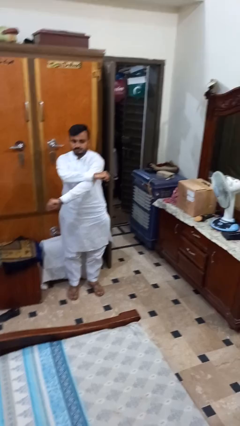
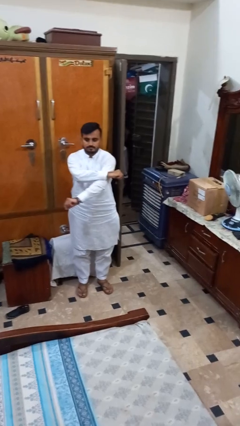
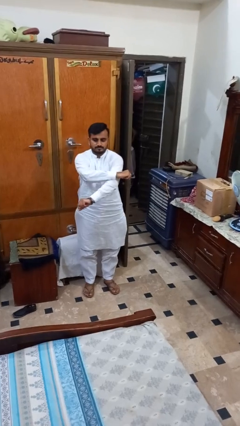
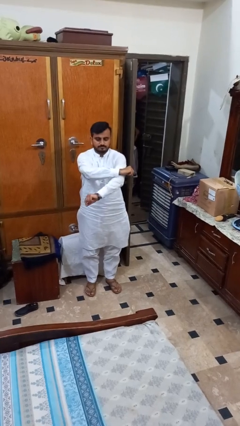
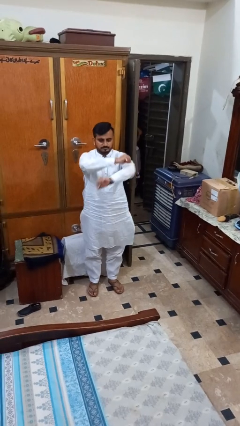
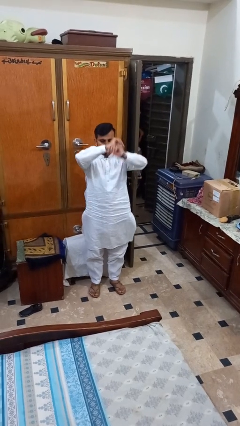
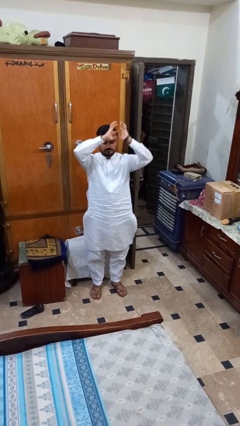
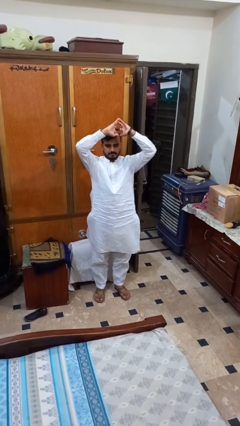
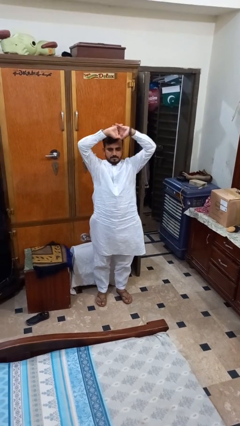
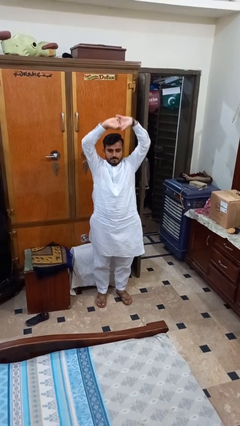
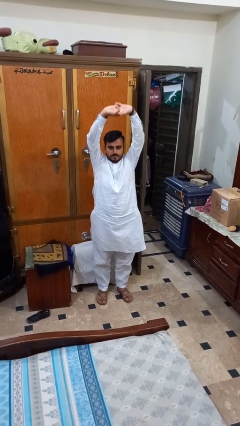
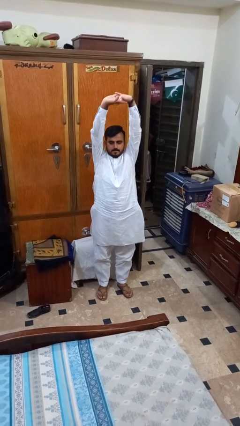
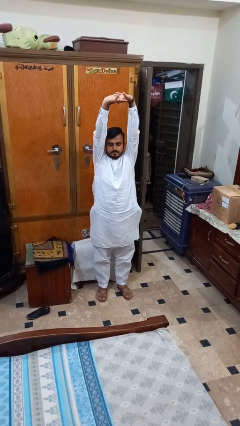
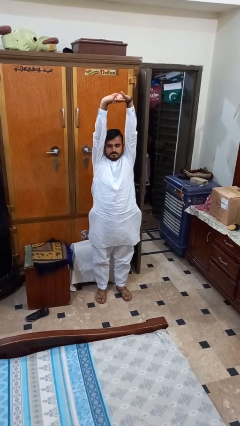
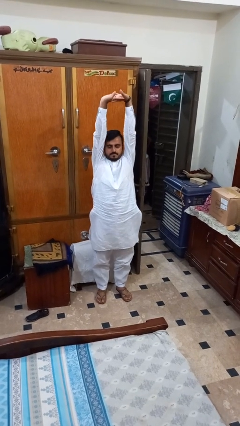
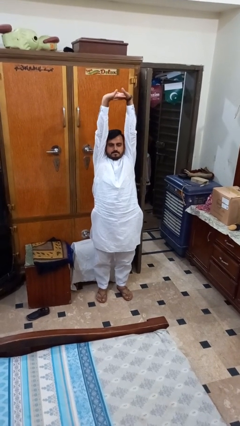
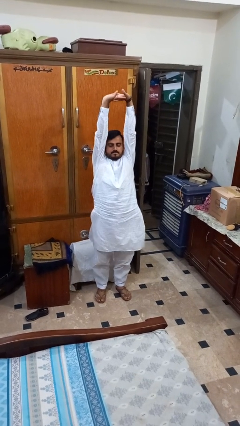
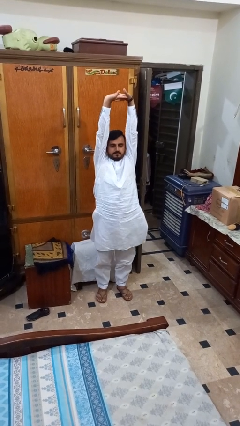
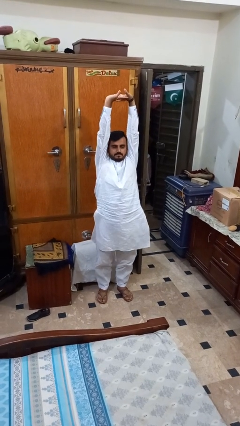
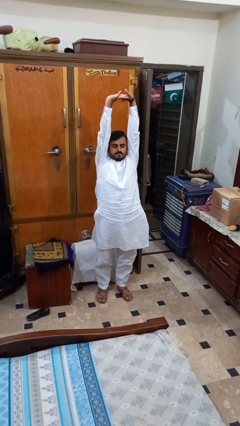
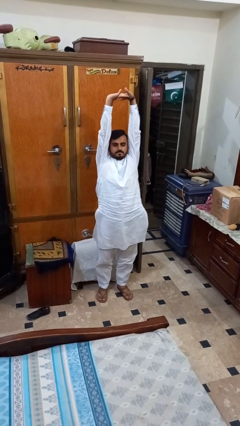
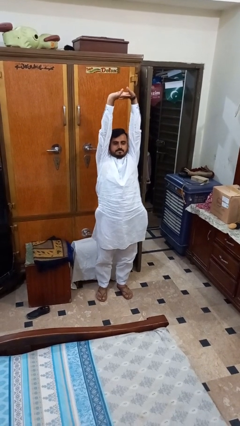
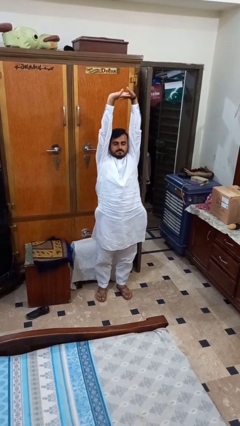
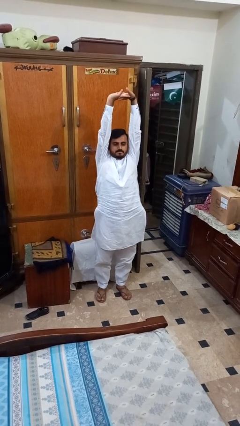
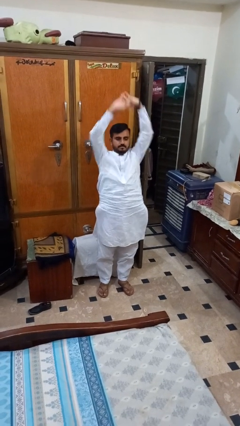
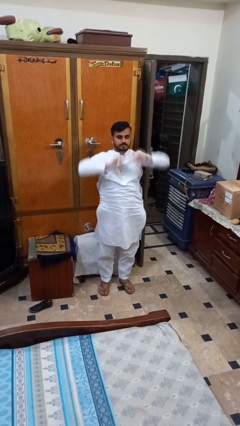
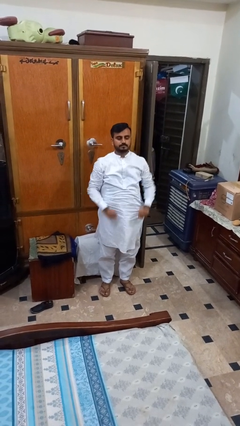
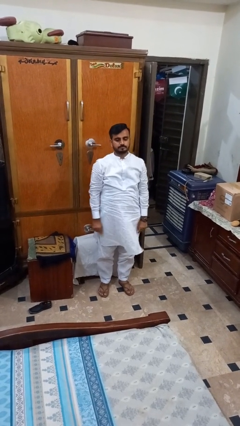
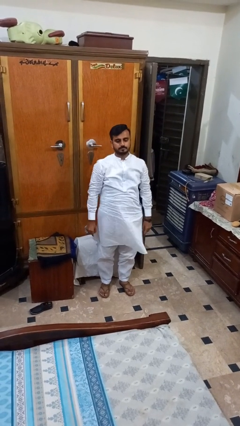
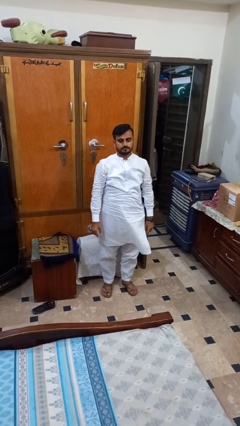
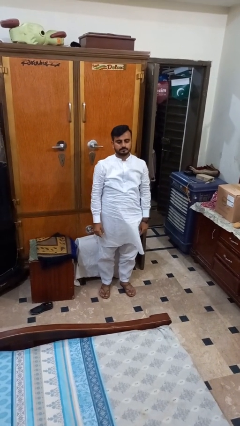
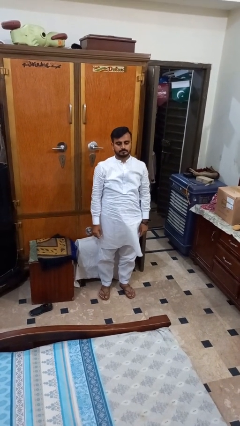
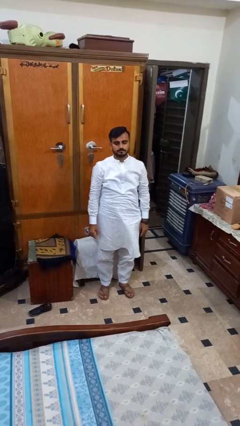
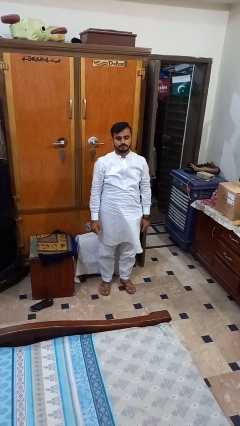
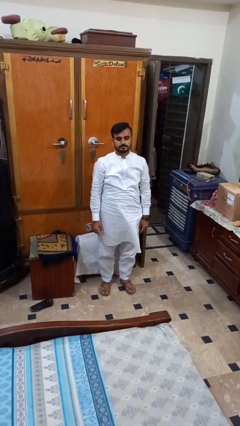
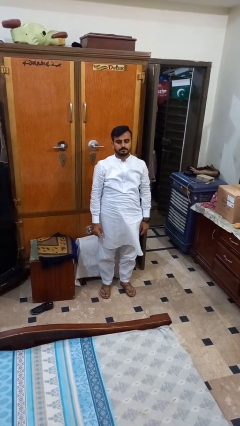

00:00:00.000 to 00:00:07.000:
person stretches arms over head

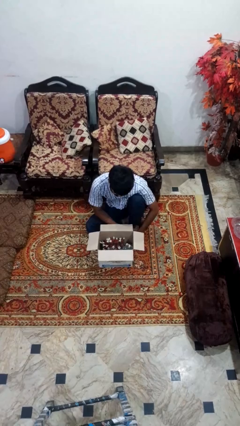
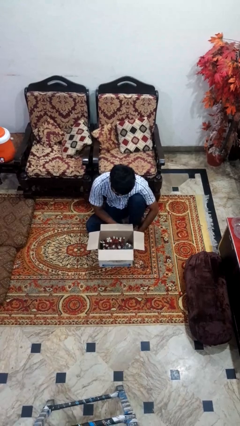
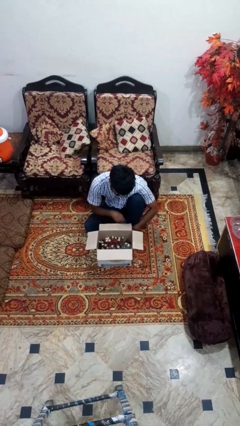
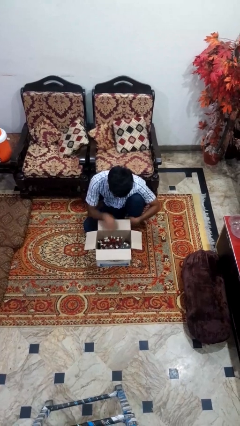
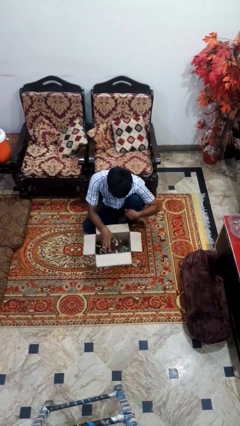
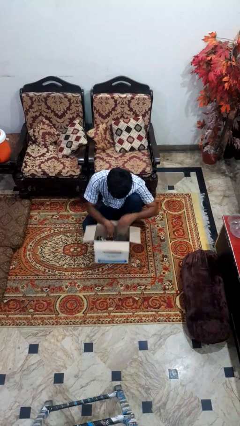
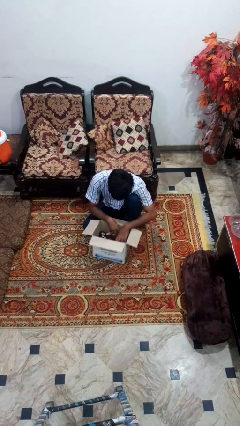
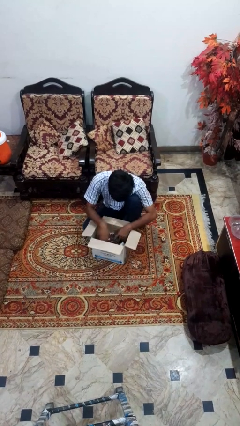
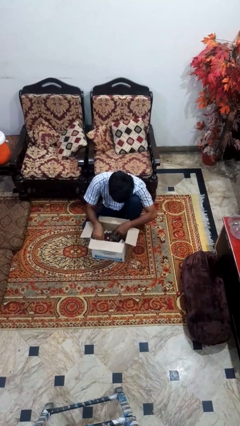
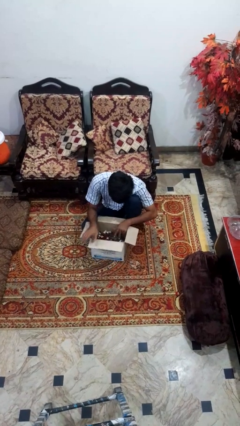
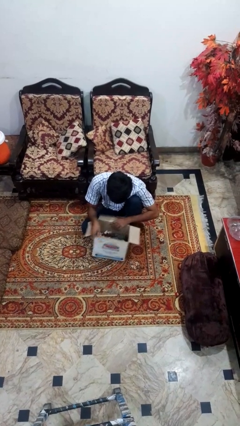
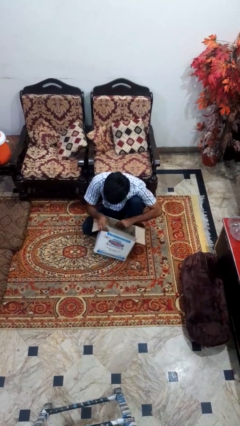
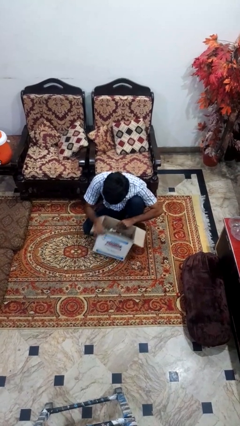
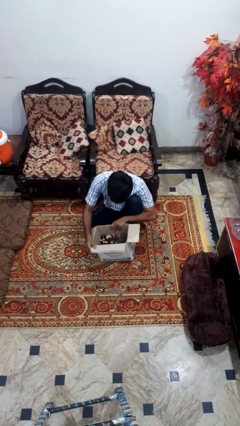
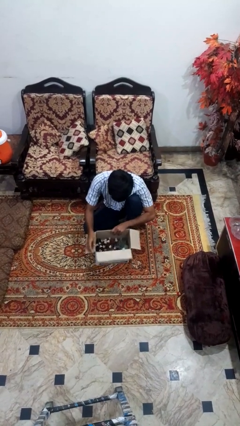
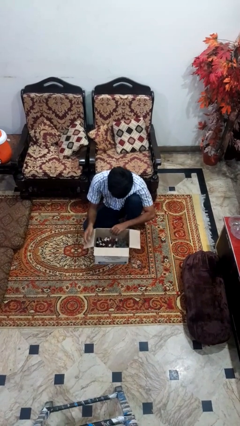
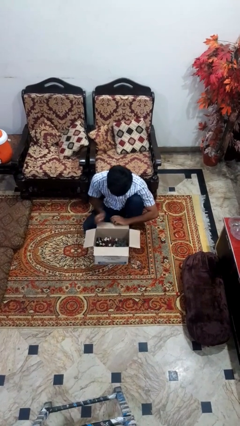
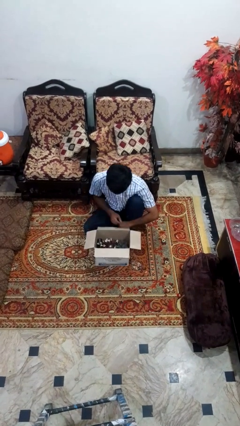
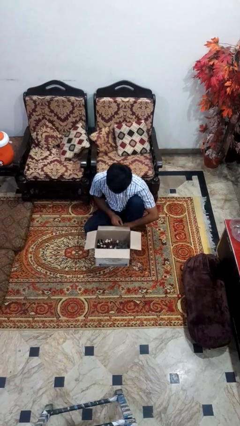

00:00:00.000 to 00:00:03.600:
person searches in box

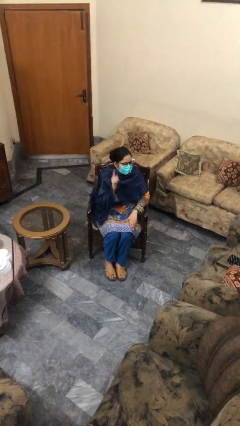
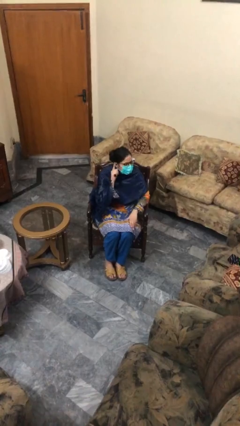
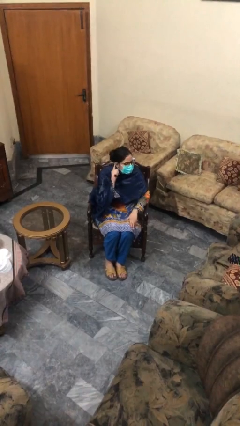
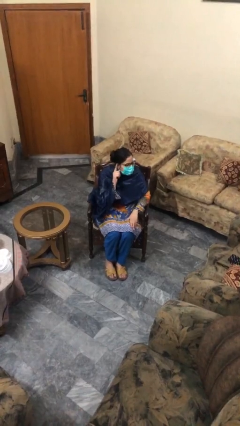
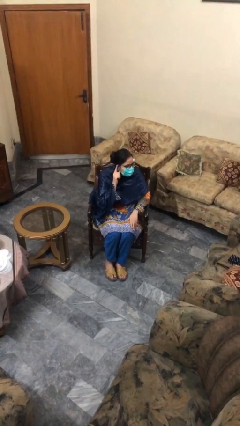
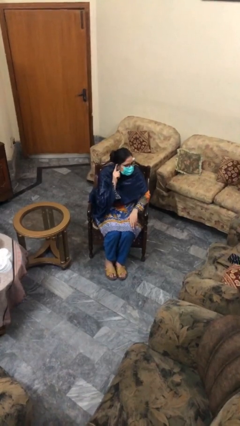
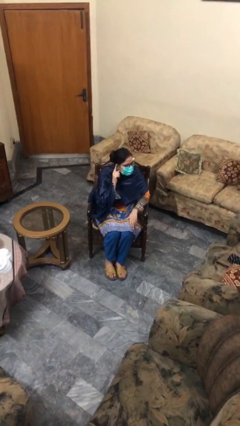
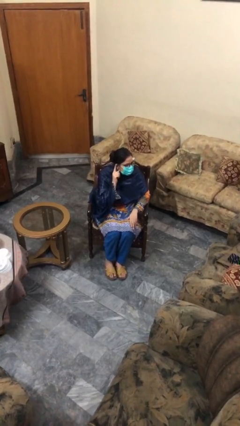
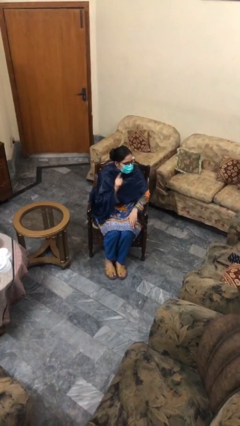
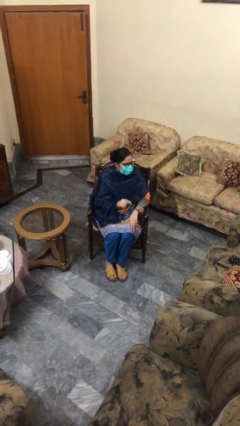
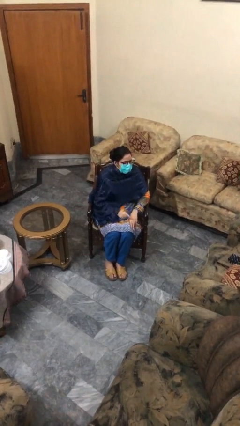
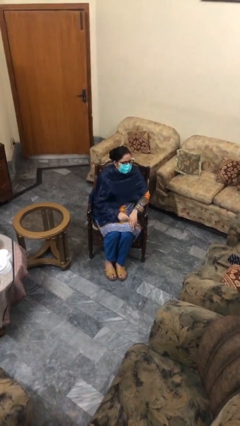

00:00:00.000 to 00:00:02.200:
person gestures listen closely

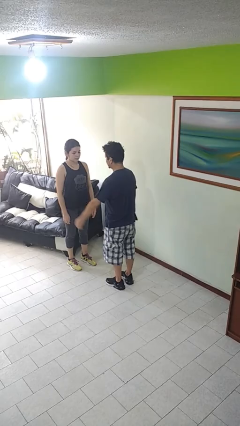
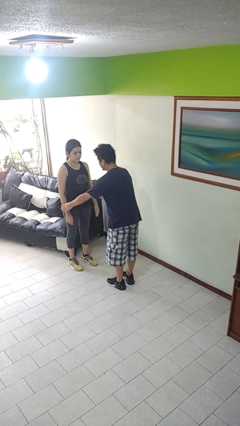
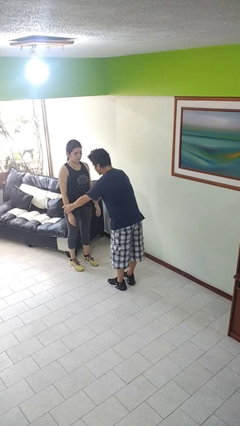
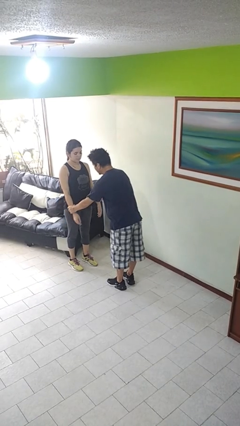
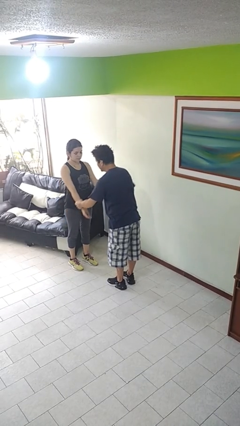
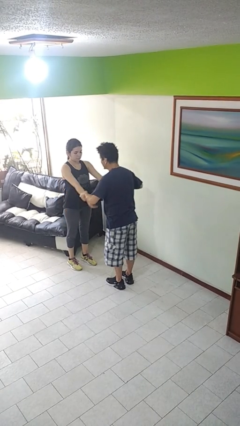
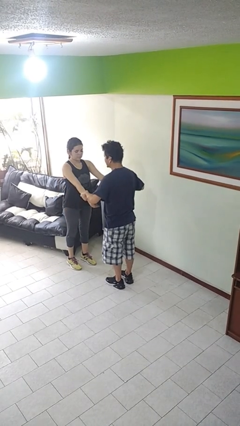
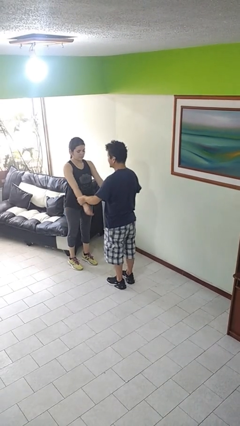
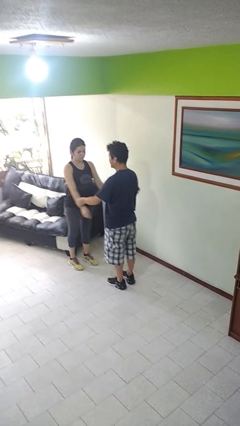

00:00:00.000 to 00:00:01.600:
person grabs person by forearm

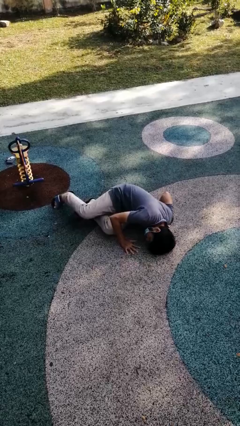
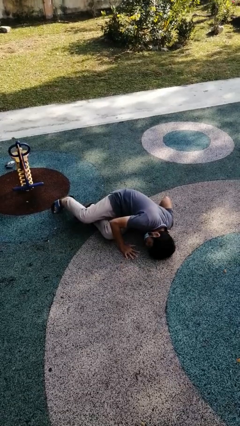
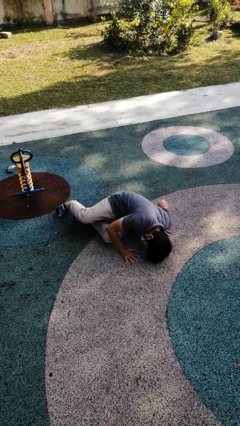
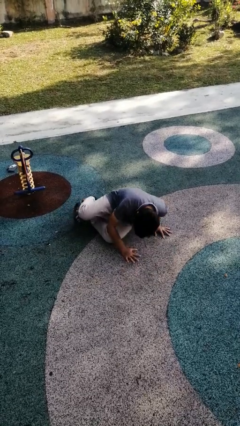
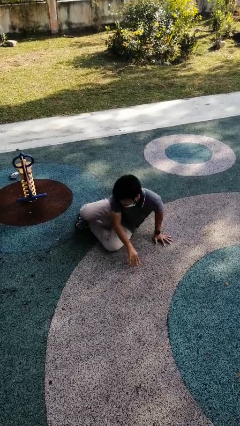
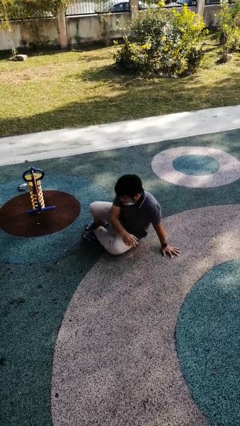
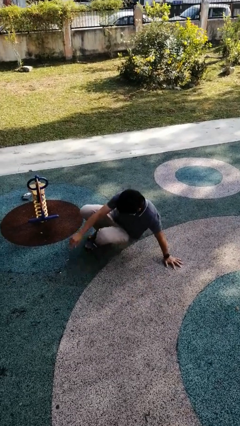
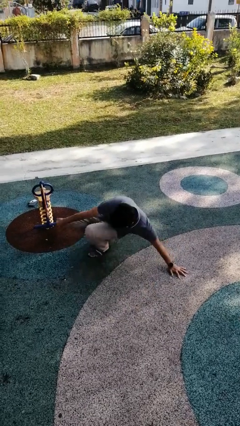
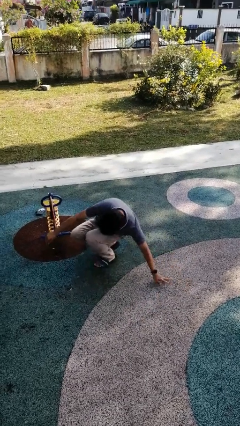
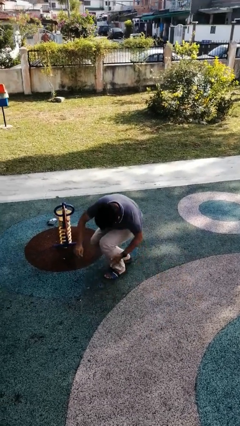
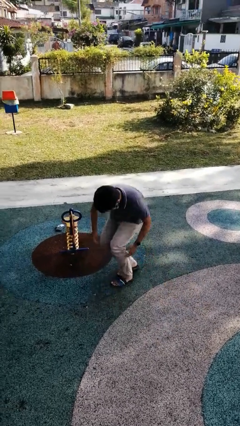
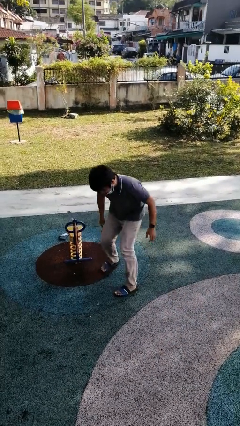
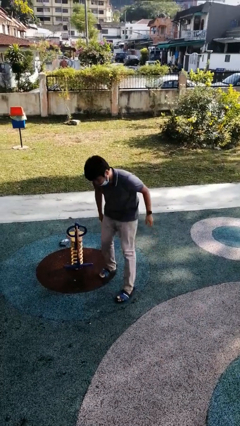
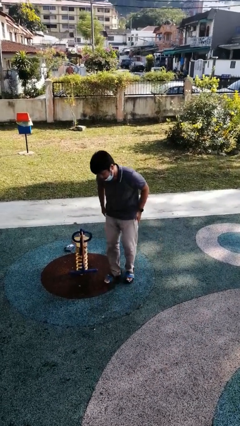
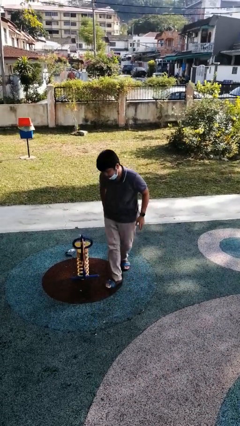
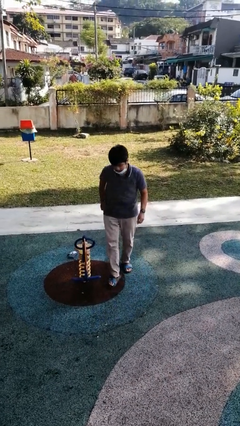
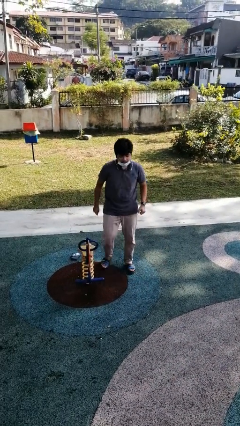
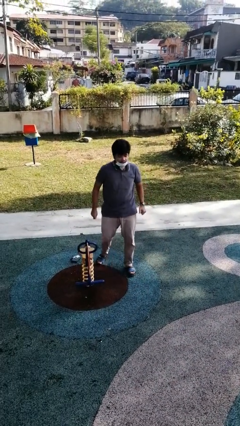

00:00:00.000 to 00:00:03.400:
person stands up from floor
